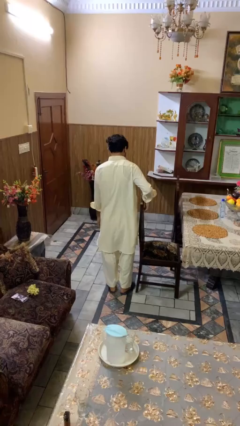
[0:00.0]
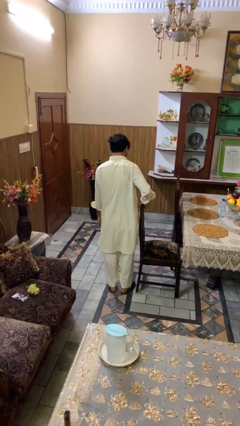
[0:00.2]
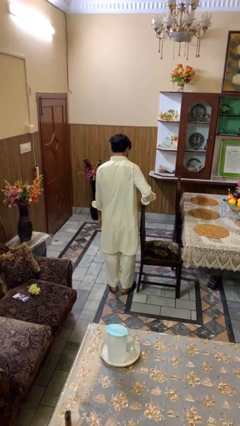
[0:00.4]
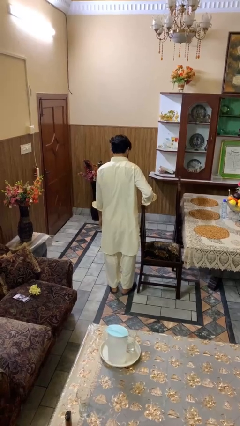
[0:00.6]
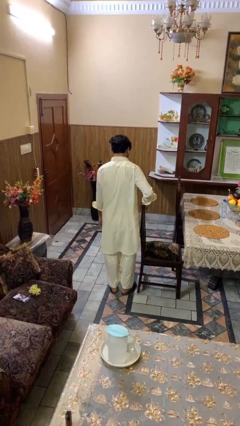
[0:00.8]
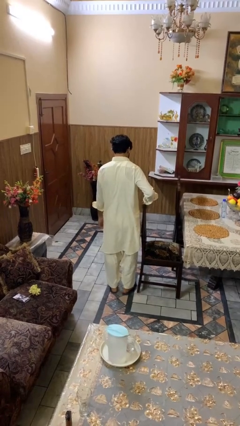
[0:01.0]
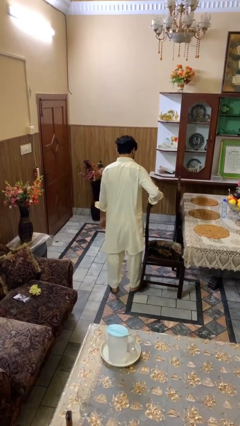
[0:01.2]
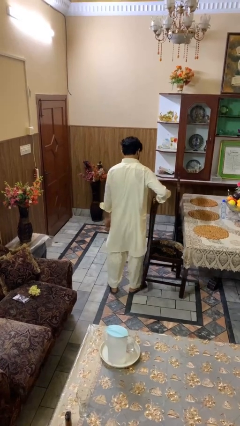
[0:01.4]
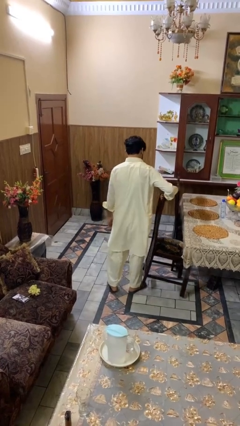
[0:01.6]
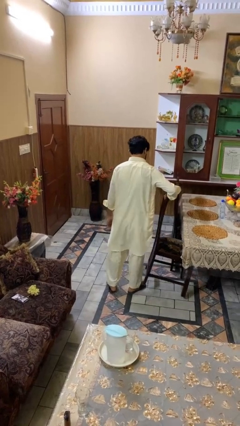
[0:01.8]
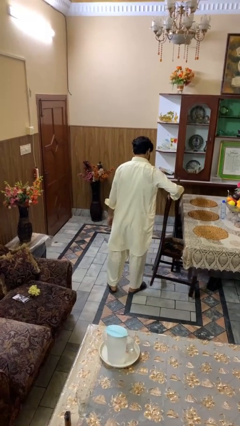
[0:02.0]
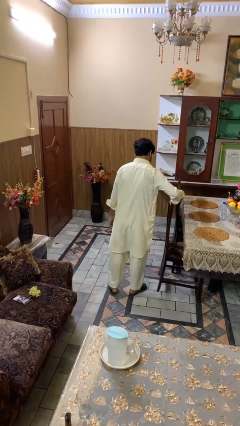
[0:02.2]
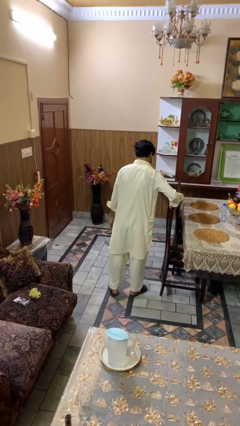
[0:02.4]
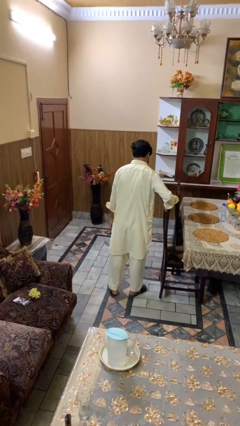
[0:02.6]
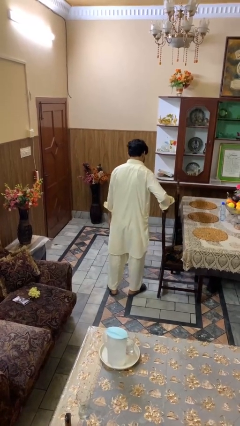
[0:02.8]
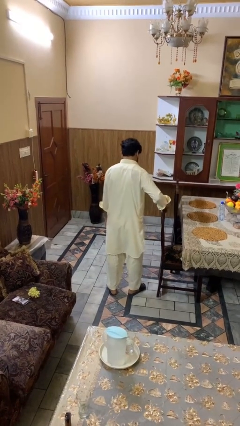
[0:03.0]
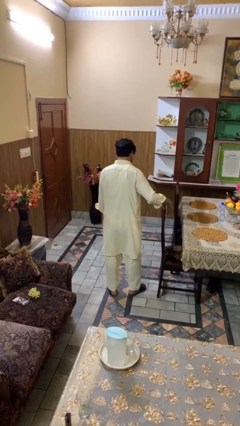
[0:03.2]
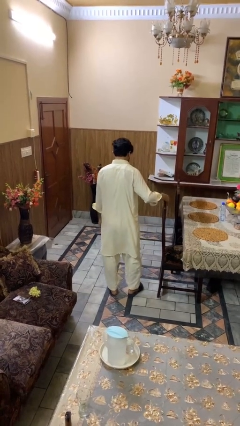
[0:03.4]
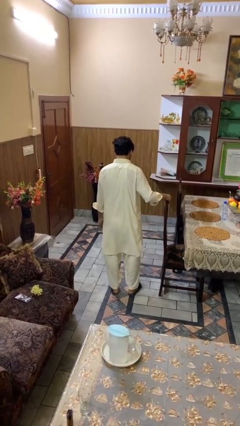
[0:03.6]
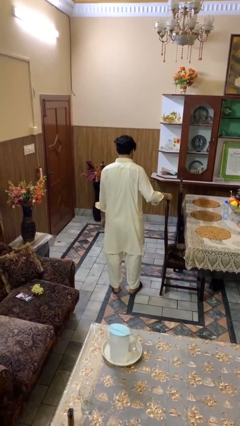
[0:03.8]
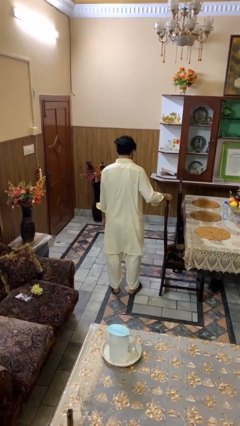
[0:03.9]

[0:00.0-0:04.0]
person pushes in chair

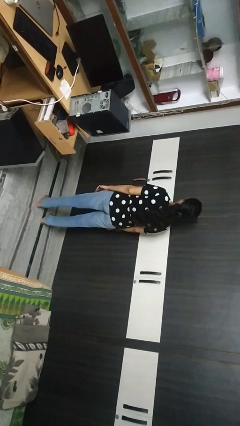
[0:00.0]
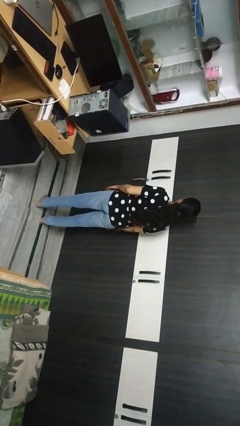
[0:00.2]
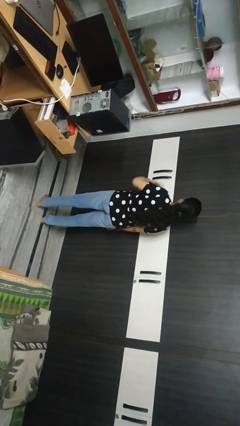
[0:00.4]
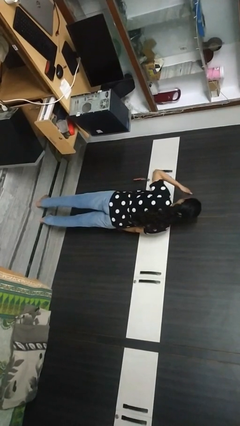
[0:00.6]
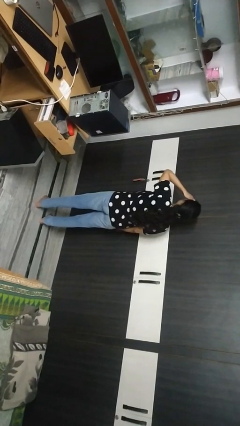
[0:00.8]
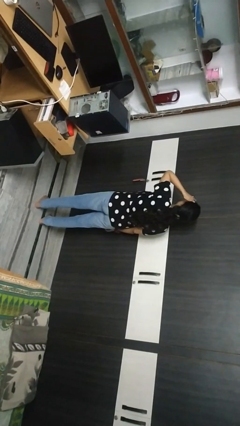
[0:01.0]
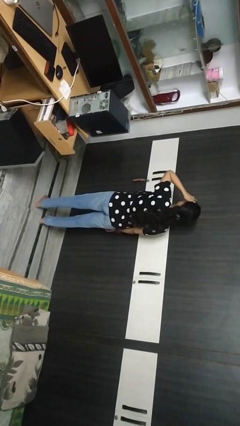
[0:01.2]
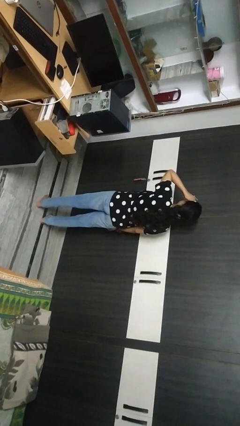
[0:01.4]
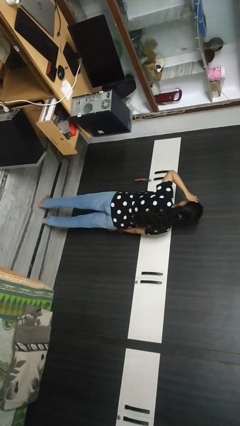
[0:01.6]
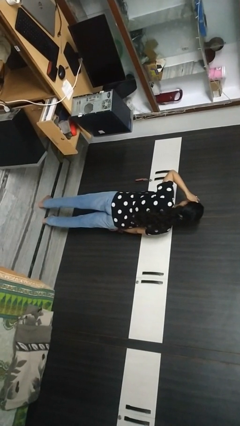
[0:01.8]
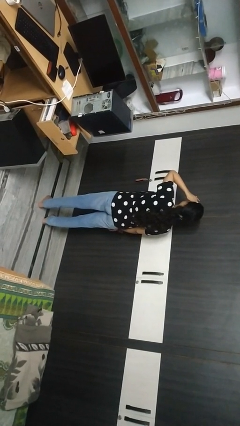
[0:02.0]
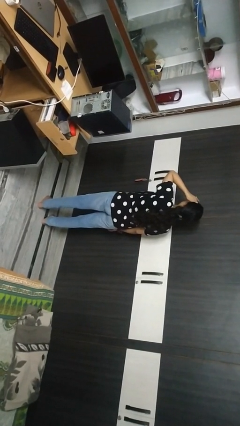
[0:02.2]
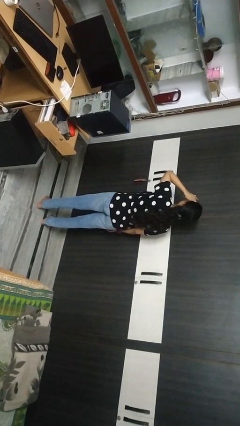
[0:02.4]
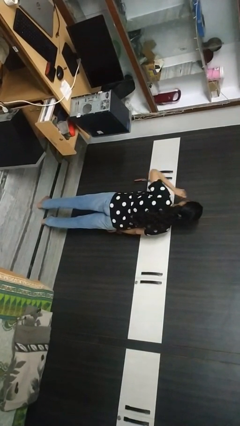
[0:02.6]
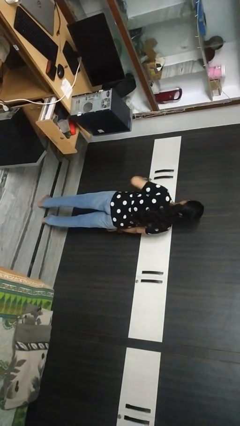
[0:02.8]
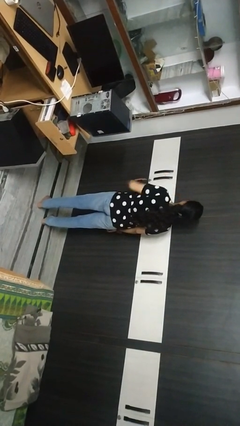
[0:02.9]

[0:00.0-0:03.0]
person shades eyes

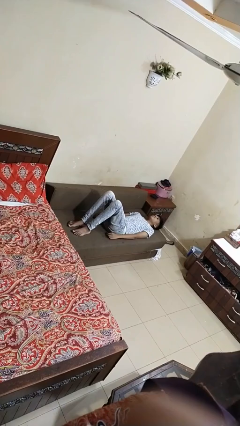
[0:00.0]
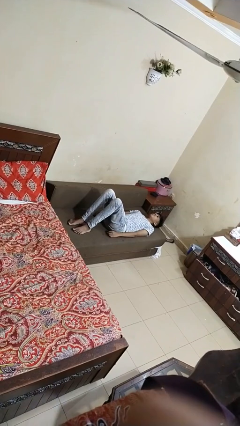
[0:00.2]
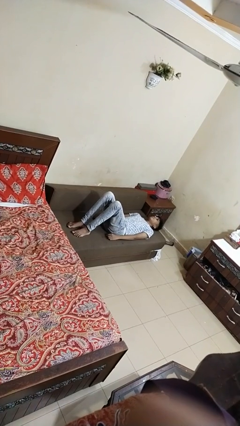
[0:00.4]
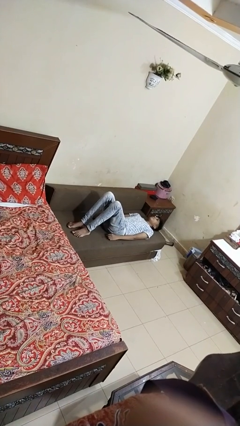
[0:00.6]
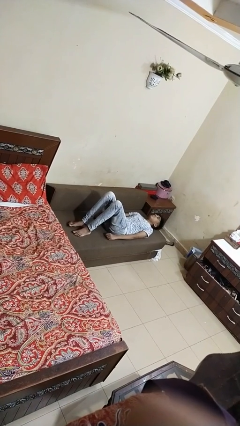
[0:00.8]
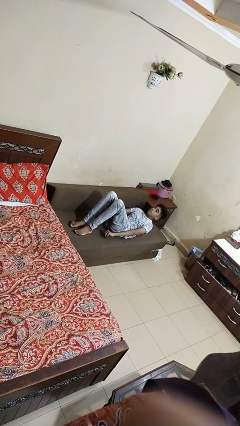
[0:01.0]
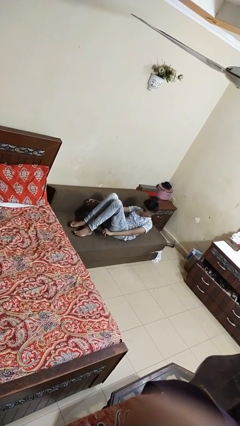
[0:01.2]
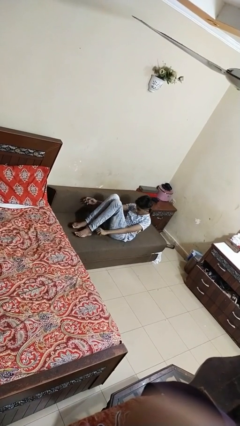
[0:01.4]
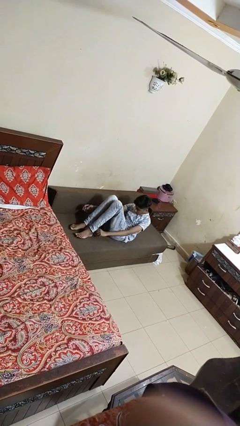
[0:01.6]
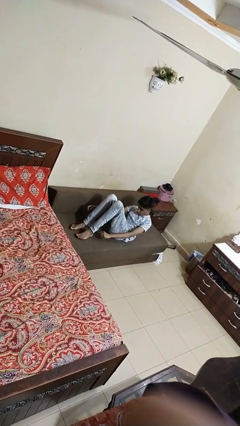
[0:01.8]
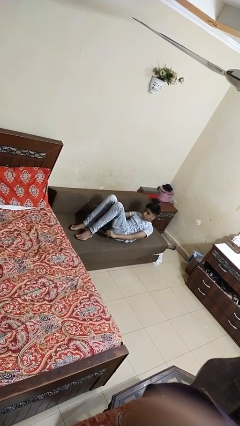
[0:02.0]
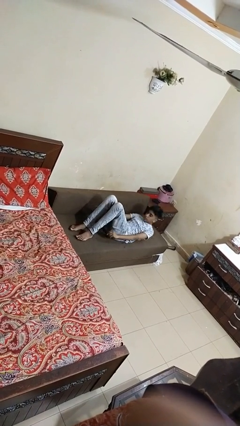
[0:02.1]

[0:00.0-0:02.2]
person exercises with situp

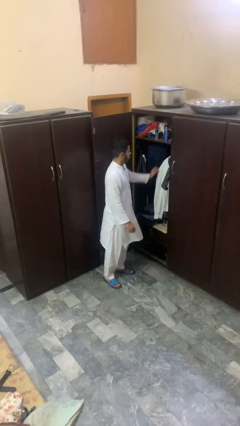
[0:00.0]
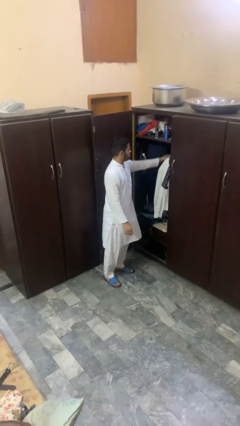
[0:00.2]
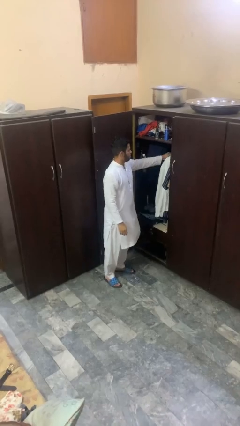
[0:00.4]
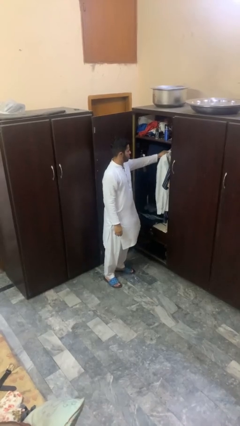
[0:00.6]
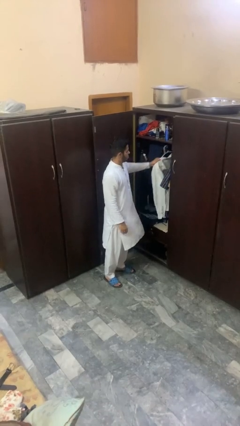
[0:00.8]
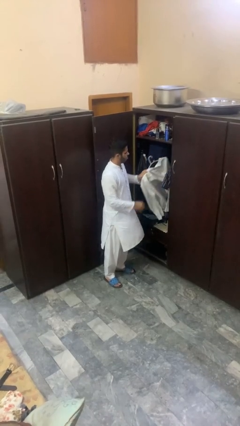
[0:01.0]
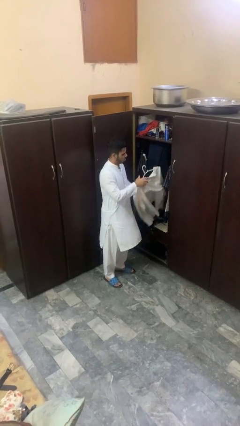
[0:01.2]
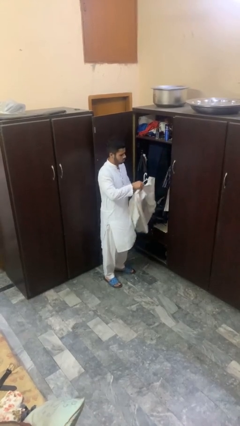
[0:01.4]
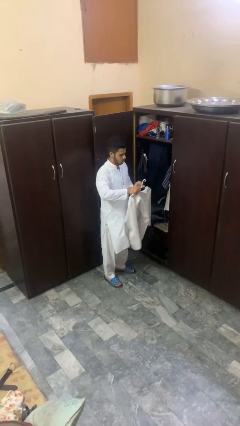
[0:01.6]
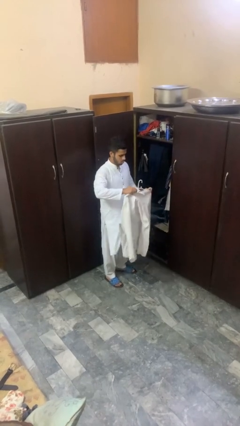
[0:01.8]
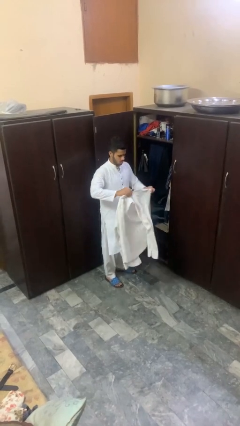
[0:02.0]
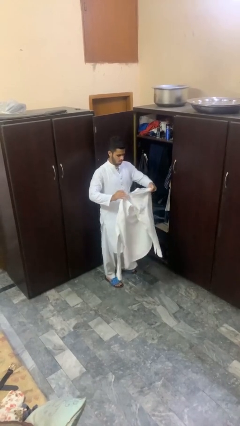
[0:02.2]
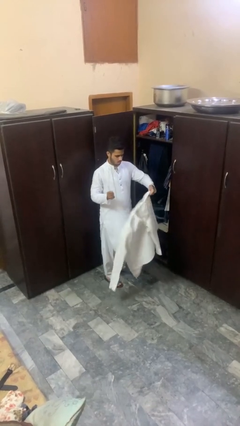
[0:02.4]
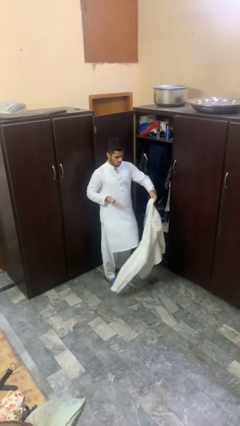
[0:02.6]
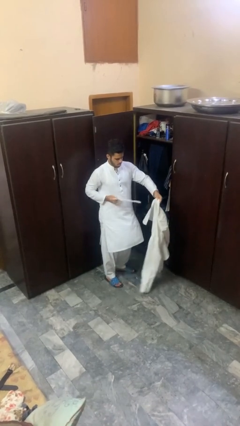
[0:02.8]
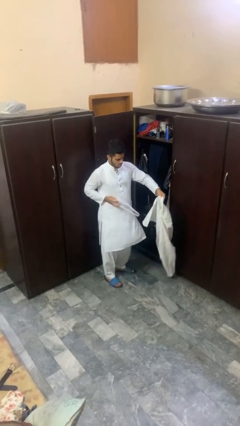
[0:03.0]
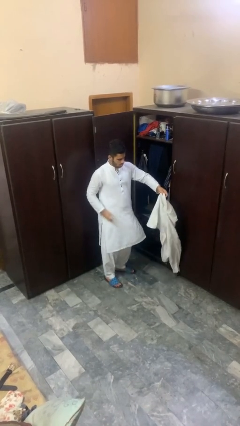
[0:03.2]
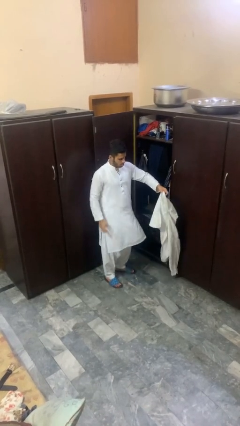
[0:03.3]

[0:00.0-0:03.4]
person takes clothes from closet

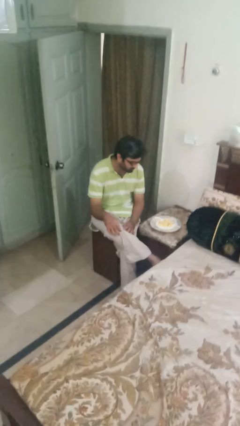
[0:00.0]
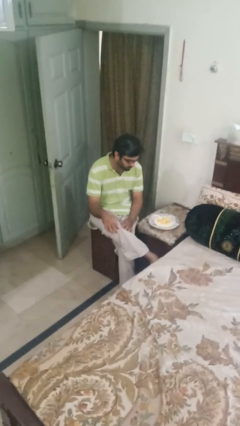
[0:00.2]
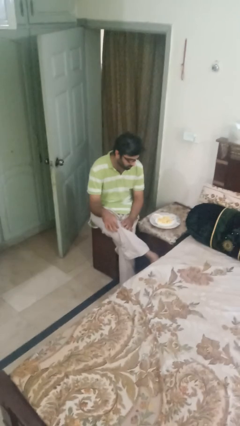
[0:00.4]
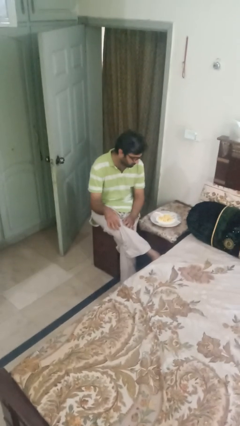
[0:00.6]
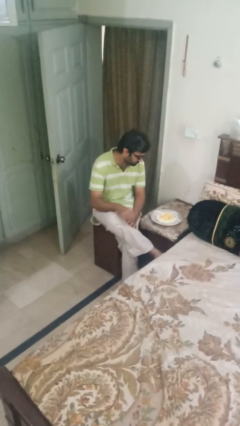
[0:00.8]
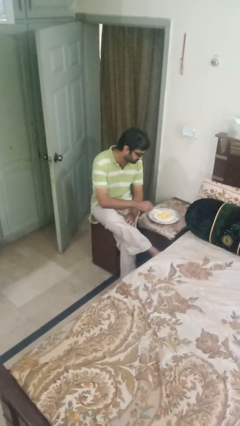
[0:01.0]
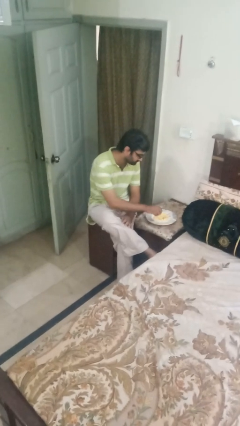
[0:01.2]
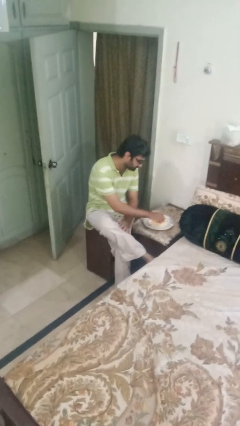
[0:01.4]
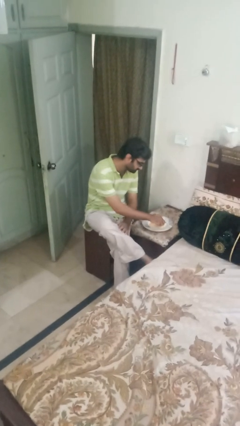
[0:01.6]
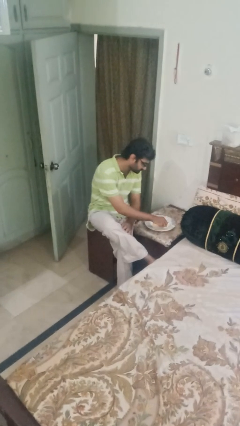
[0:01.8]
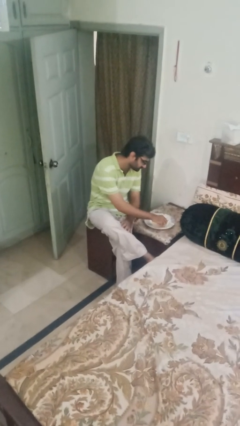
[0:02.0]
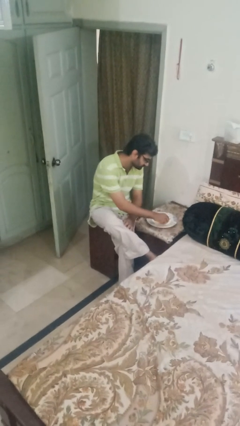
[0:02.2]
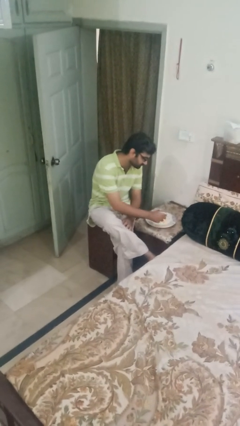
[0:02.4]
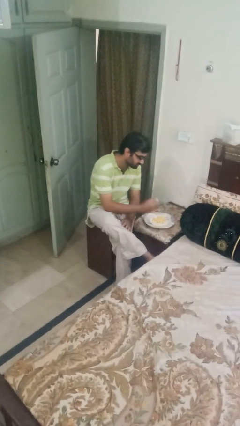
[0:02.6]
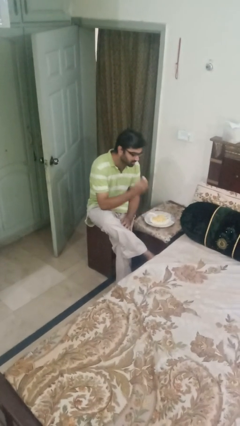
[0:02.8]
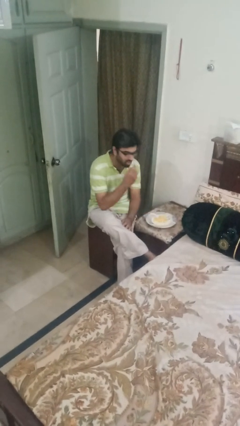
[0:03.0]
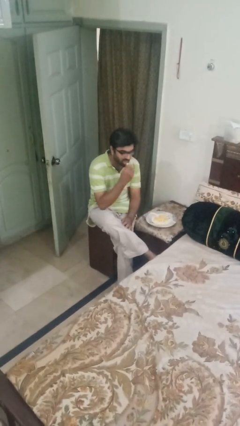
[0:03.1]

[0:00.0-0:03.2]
person eats with hands

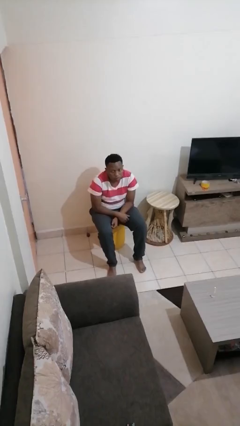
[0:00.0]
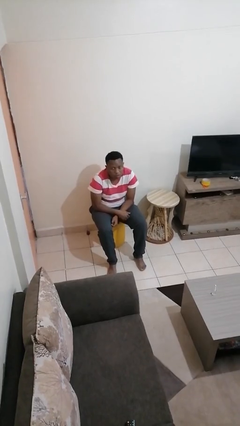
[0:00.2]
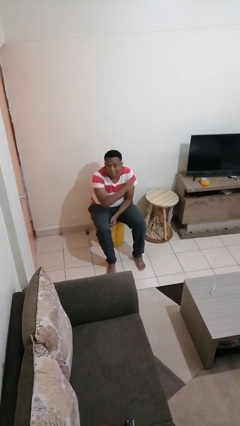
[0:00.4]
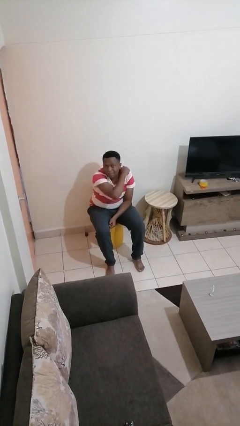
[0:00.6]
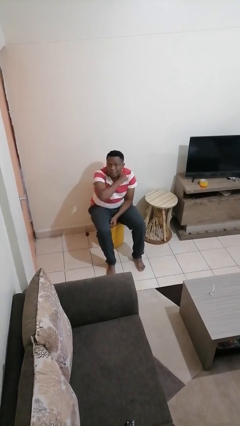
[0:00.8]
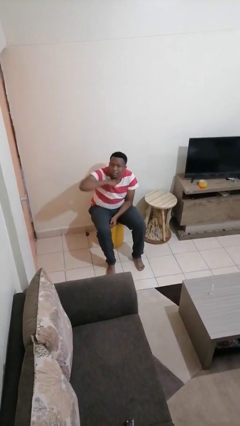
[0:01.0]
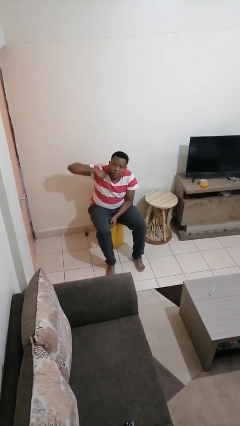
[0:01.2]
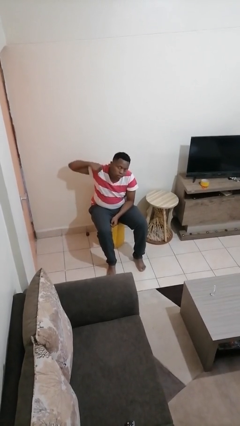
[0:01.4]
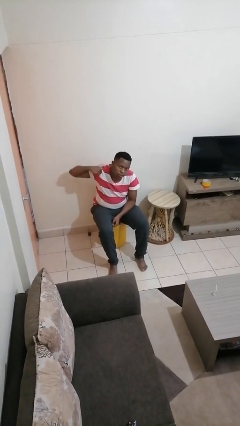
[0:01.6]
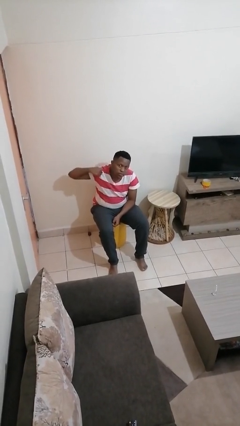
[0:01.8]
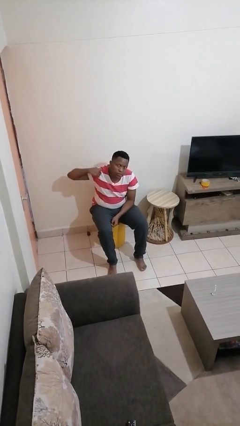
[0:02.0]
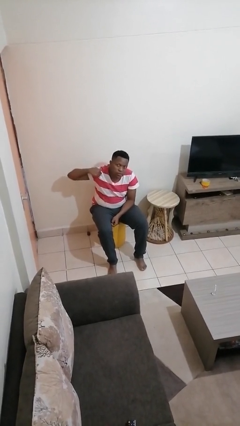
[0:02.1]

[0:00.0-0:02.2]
person gestures cut
